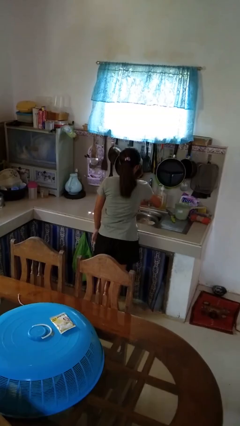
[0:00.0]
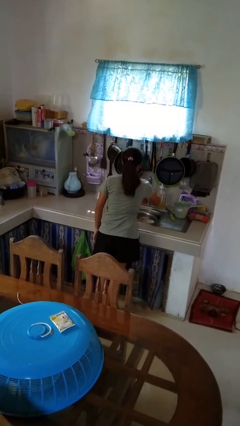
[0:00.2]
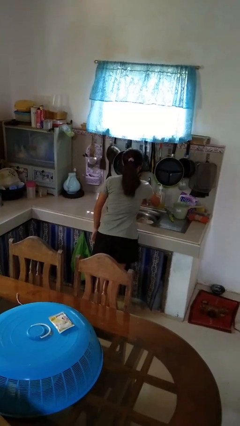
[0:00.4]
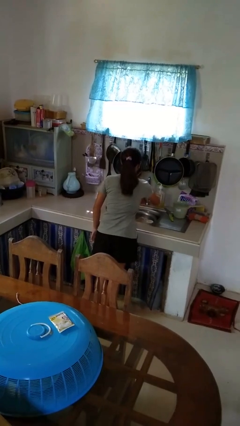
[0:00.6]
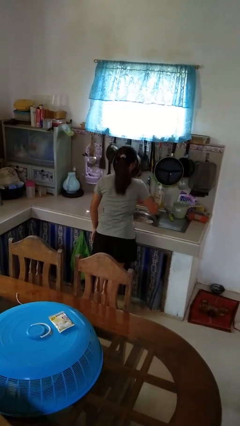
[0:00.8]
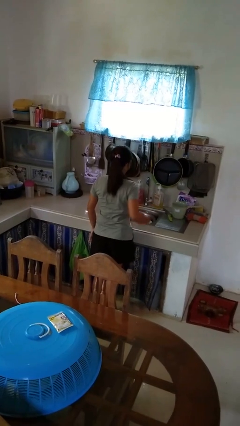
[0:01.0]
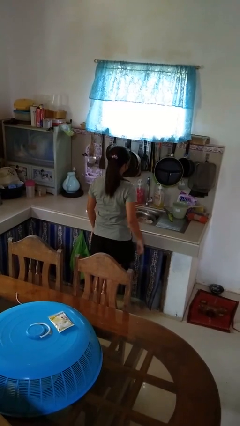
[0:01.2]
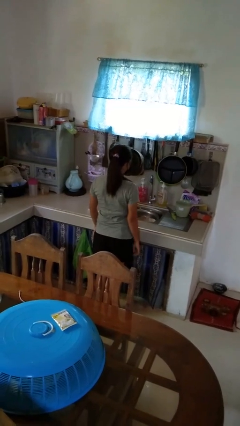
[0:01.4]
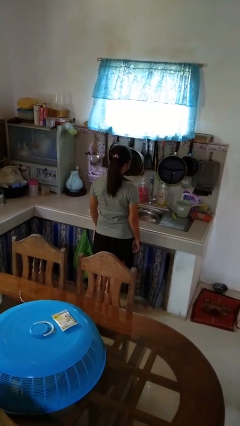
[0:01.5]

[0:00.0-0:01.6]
person turns off faucet

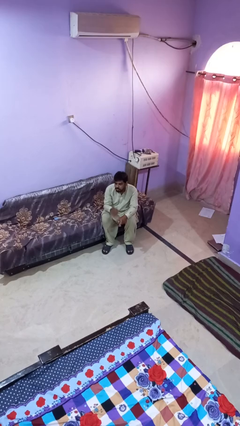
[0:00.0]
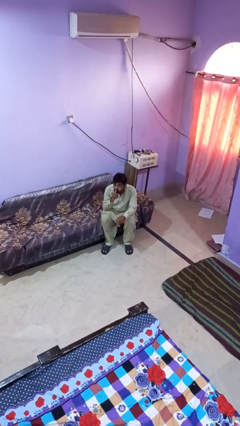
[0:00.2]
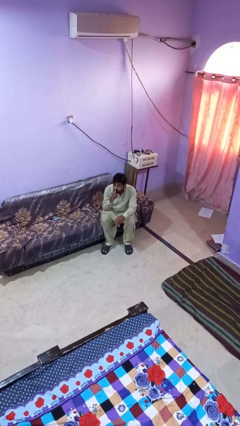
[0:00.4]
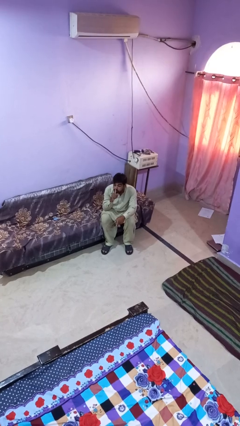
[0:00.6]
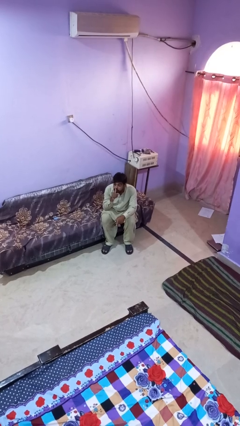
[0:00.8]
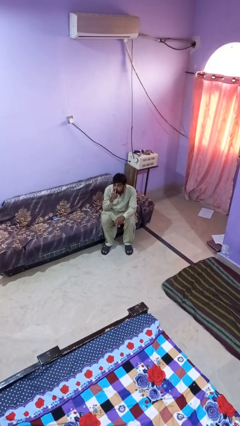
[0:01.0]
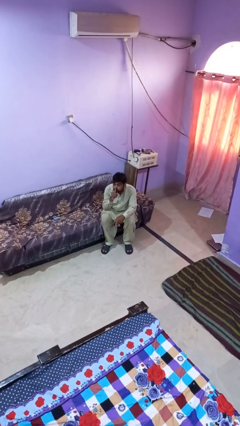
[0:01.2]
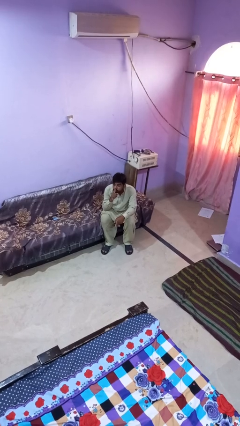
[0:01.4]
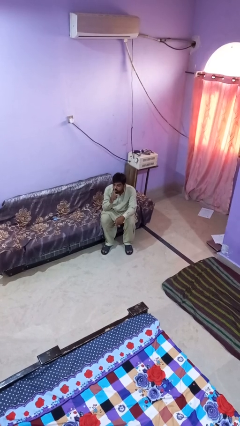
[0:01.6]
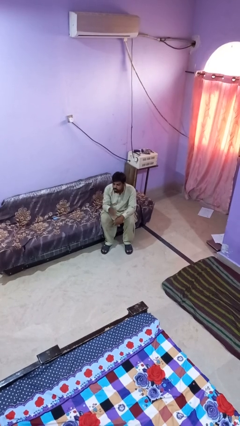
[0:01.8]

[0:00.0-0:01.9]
person gestures be quiet

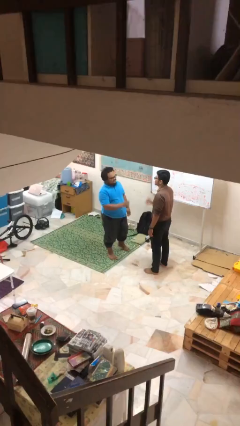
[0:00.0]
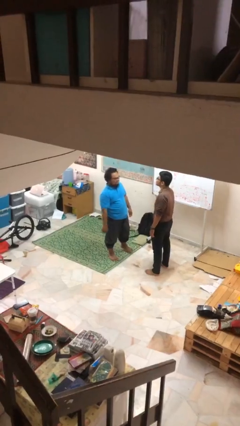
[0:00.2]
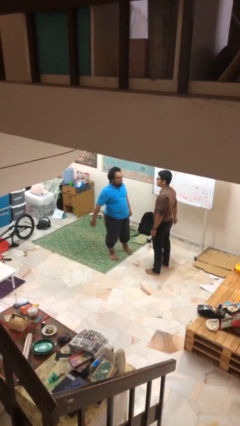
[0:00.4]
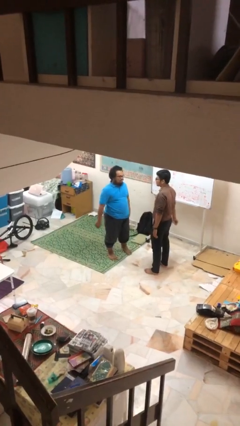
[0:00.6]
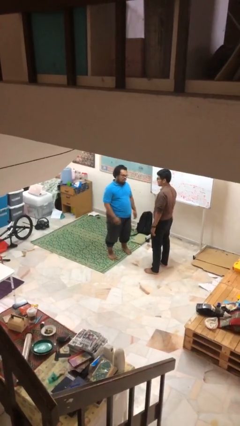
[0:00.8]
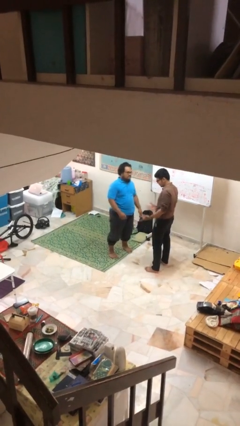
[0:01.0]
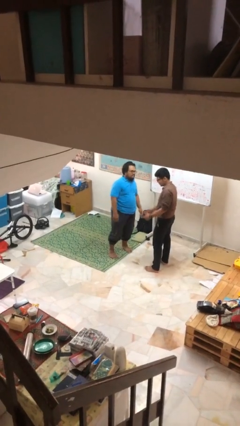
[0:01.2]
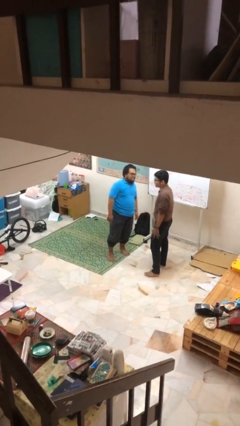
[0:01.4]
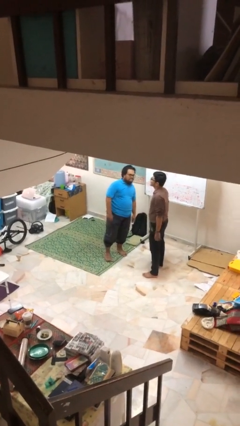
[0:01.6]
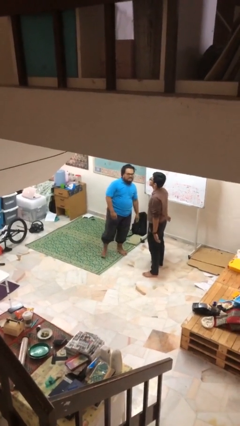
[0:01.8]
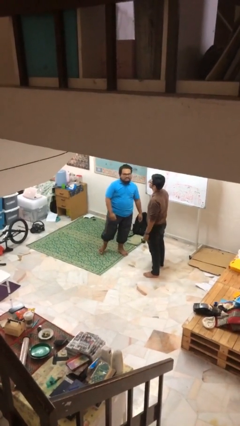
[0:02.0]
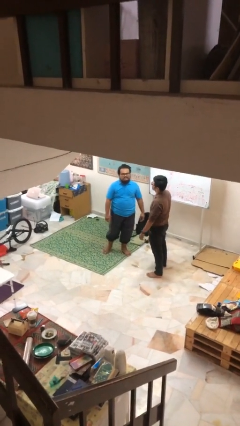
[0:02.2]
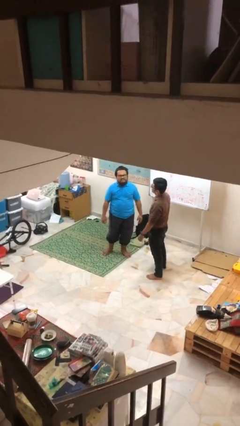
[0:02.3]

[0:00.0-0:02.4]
person talks to person

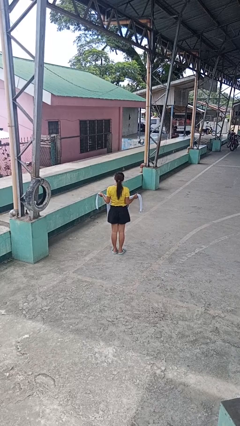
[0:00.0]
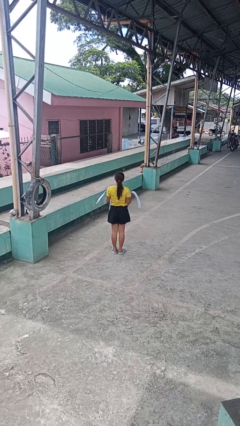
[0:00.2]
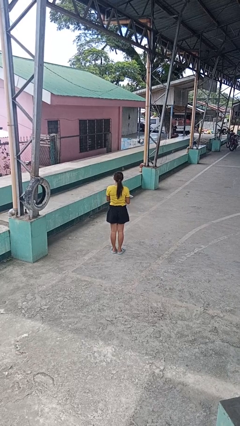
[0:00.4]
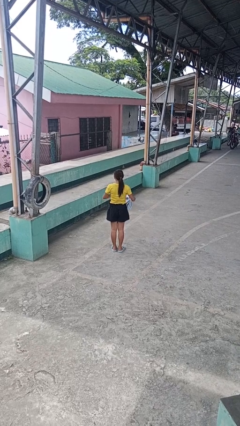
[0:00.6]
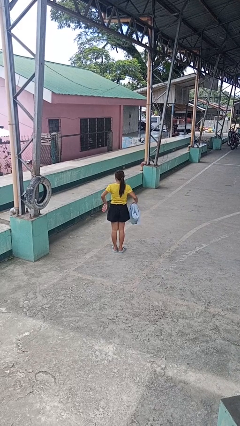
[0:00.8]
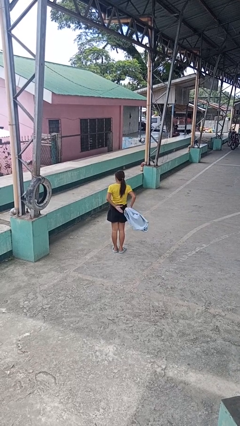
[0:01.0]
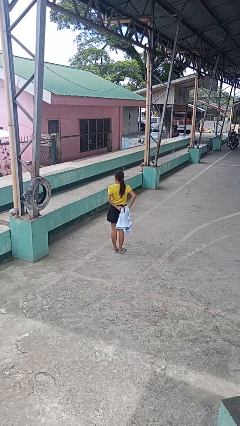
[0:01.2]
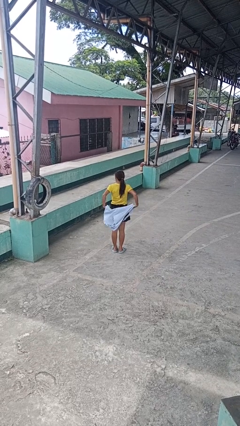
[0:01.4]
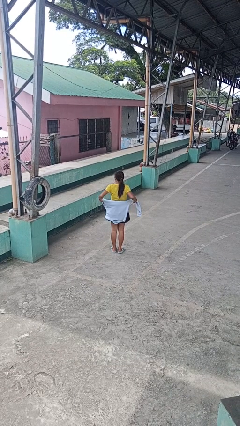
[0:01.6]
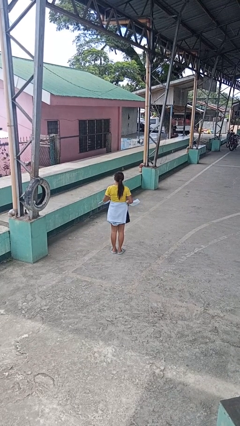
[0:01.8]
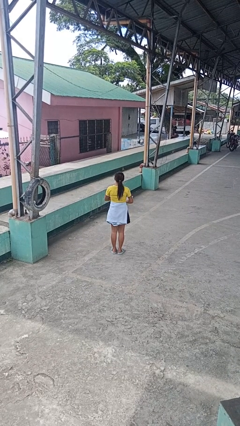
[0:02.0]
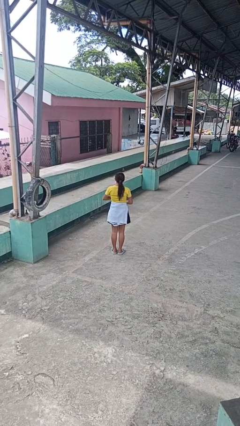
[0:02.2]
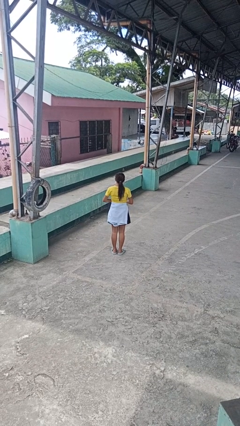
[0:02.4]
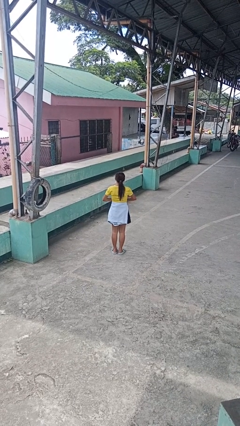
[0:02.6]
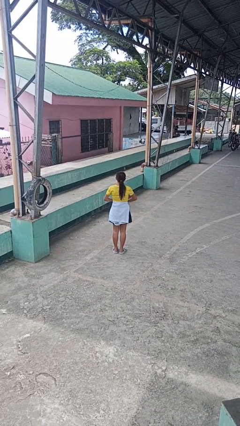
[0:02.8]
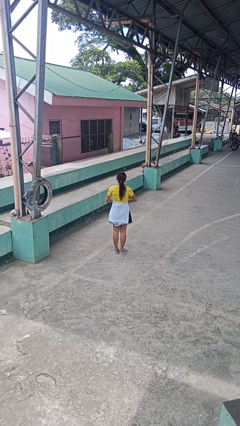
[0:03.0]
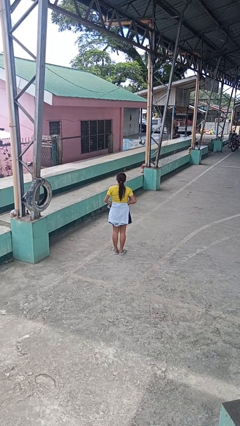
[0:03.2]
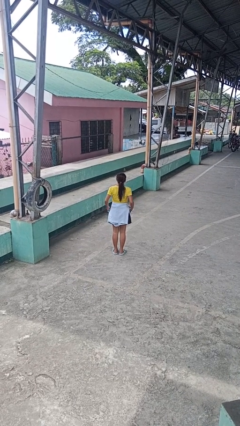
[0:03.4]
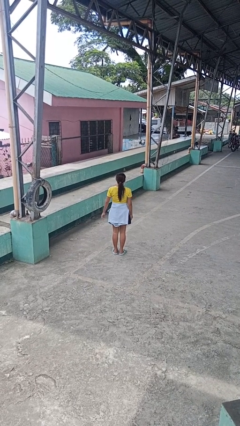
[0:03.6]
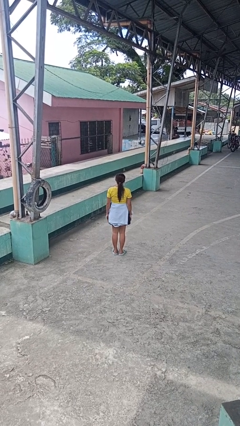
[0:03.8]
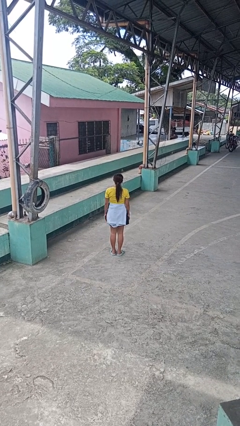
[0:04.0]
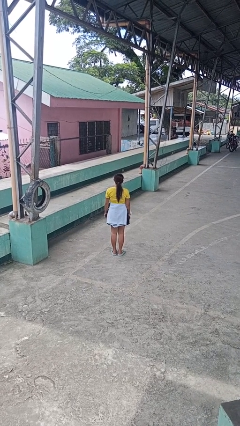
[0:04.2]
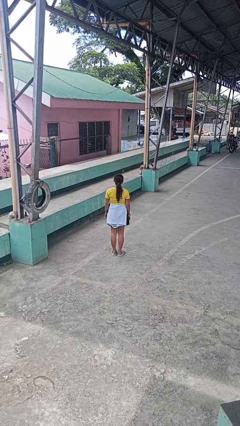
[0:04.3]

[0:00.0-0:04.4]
person ties jacket around waist

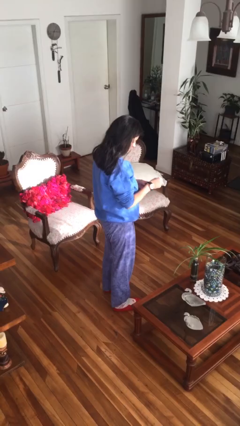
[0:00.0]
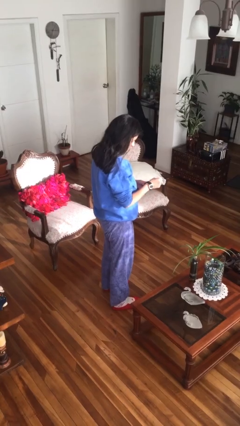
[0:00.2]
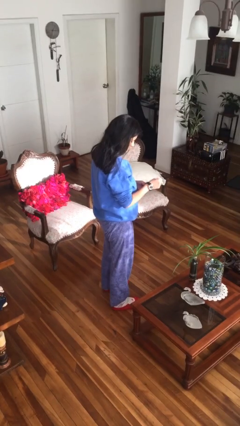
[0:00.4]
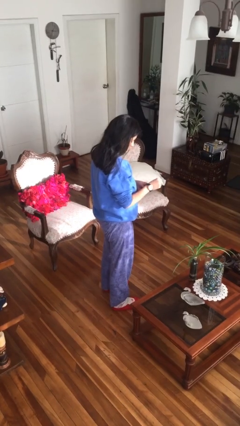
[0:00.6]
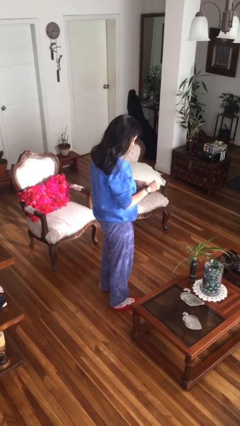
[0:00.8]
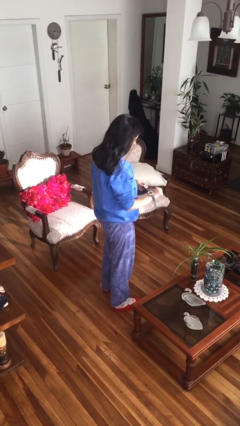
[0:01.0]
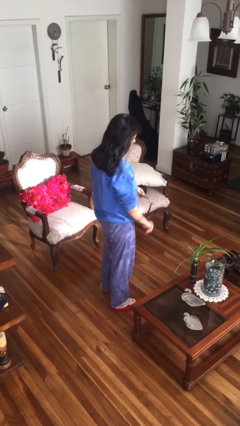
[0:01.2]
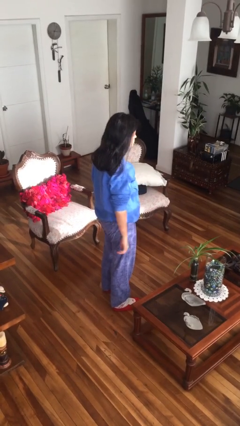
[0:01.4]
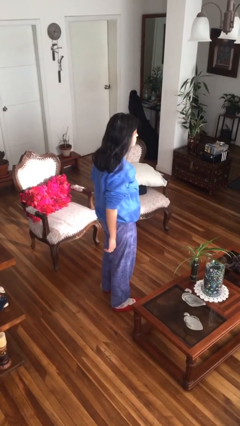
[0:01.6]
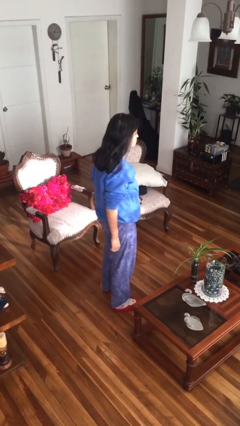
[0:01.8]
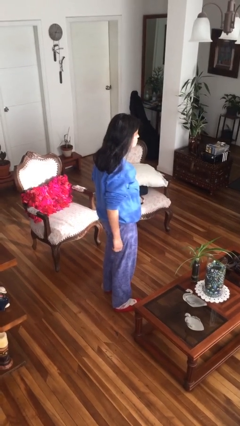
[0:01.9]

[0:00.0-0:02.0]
person takes off wristwatch

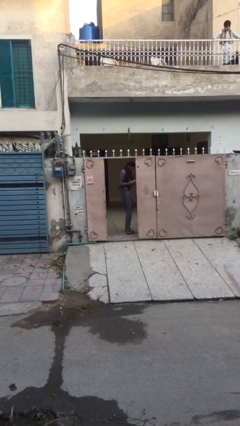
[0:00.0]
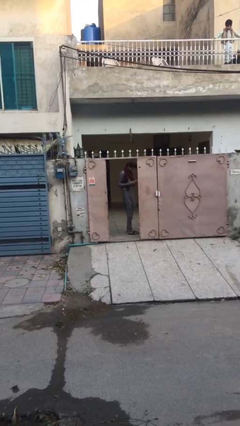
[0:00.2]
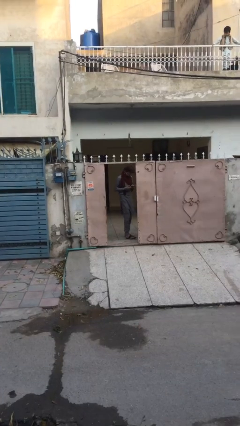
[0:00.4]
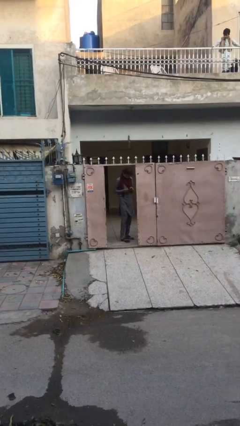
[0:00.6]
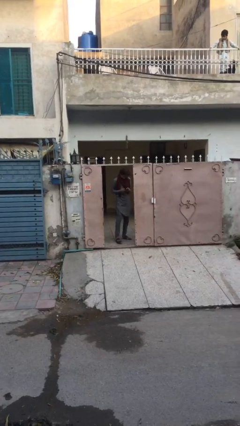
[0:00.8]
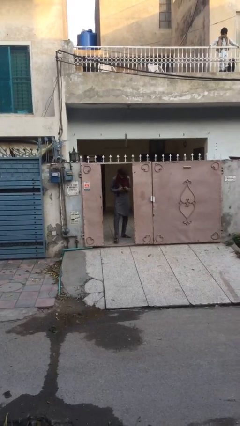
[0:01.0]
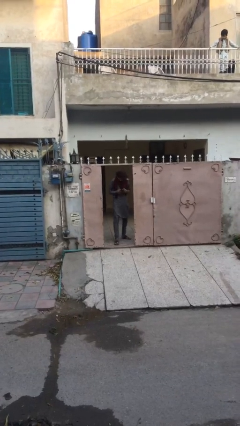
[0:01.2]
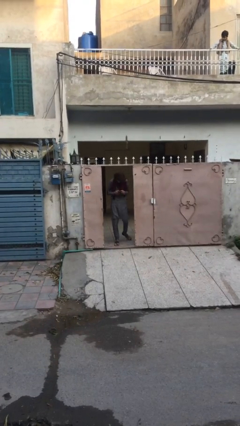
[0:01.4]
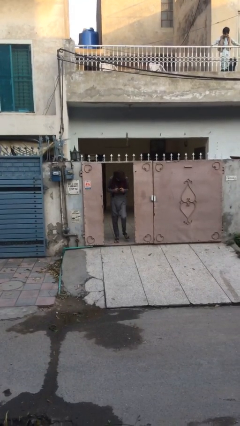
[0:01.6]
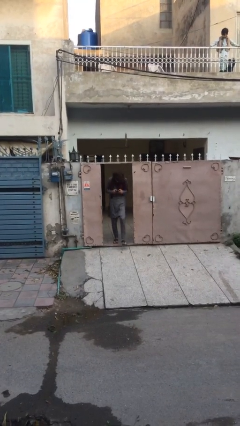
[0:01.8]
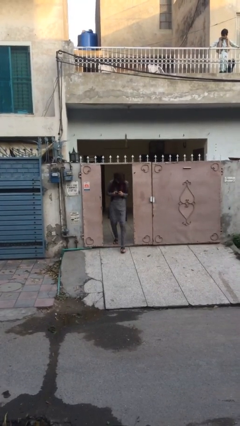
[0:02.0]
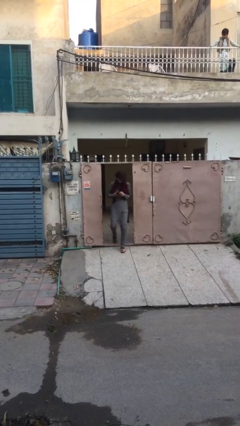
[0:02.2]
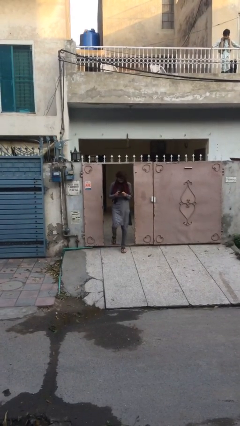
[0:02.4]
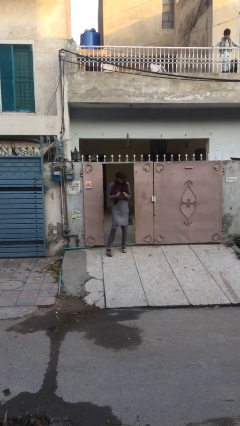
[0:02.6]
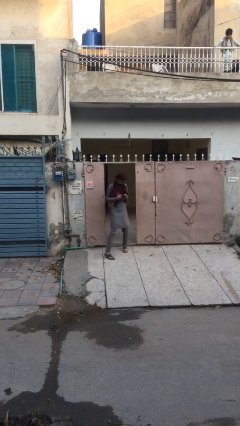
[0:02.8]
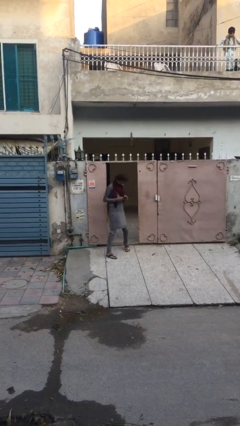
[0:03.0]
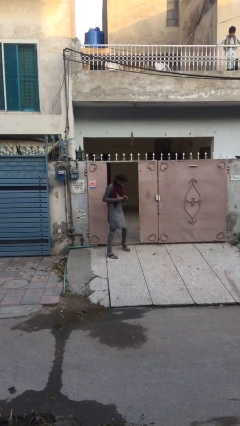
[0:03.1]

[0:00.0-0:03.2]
person exits scene through structure

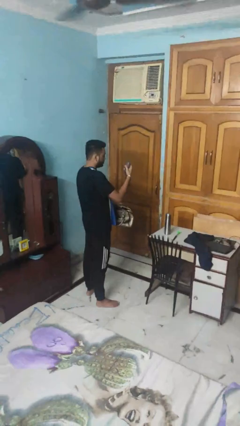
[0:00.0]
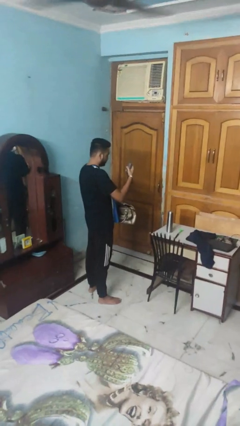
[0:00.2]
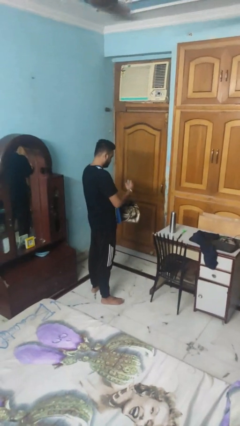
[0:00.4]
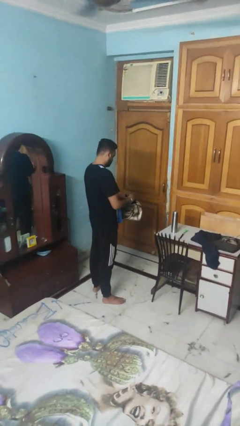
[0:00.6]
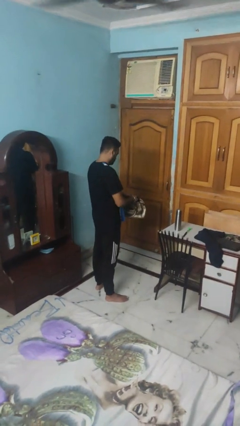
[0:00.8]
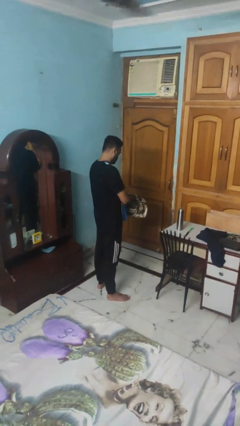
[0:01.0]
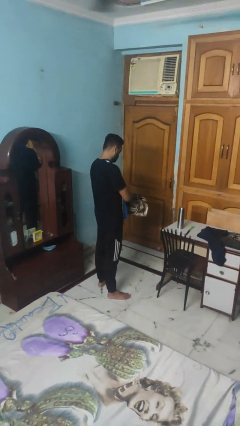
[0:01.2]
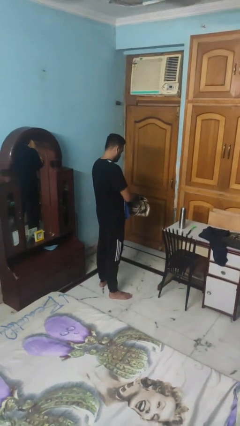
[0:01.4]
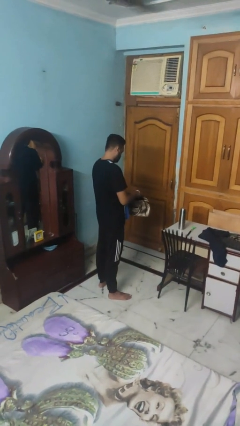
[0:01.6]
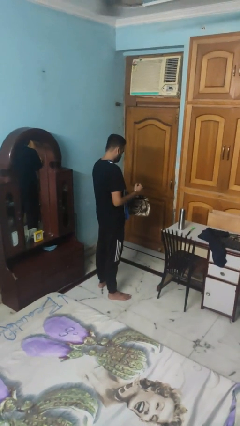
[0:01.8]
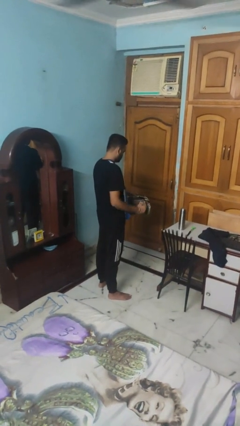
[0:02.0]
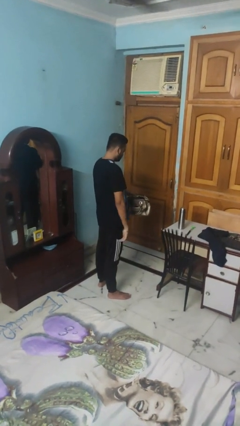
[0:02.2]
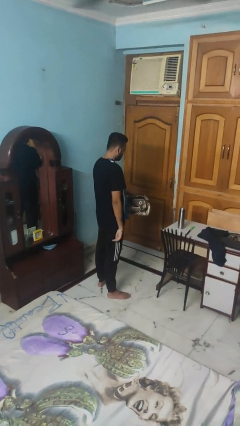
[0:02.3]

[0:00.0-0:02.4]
person puts object into purse
